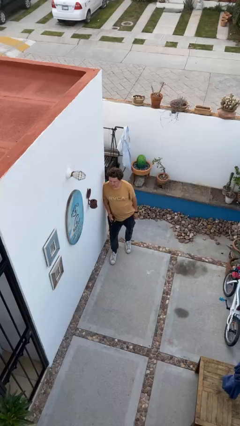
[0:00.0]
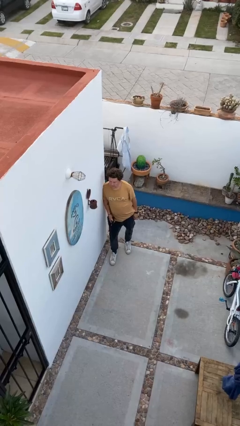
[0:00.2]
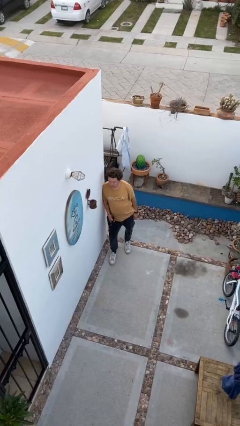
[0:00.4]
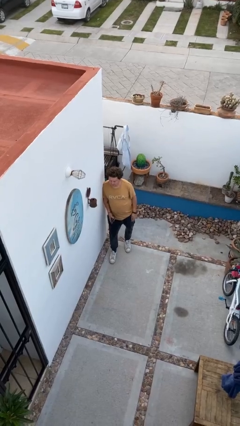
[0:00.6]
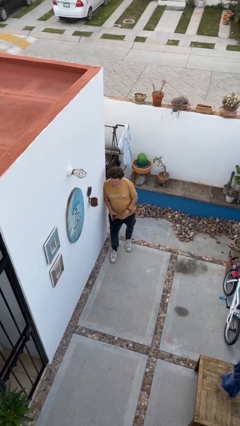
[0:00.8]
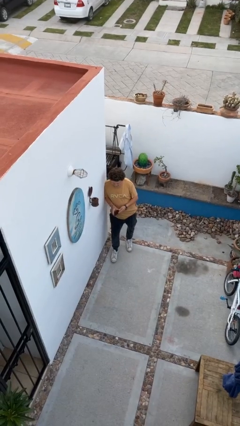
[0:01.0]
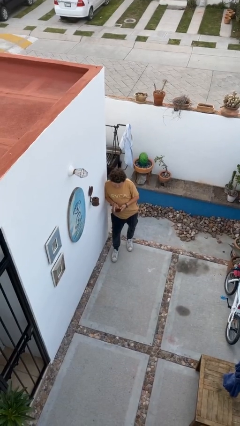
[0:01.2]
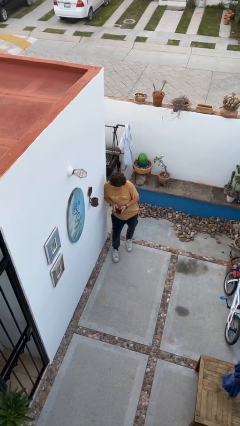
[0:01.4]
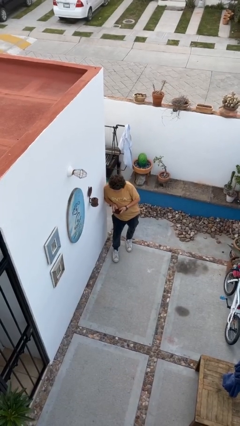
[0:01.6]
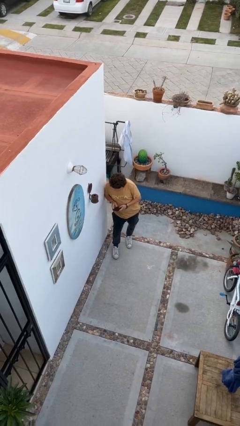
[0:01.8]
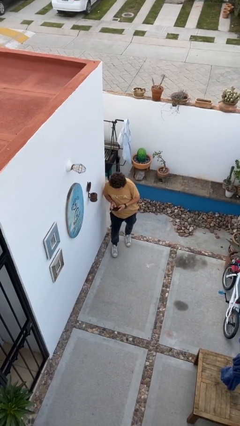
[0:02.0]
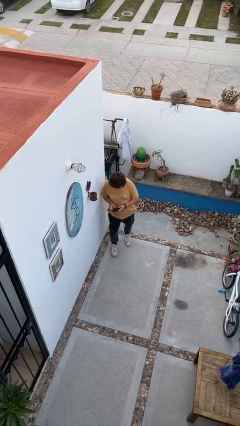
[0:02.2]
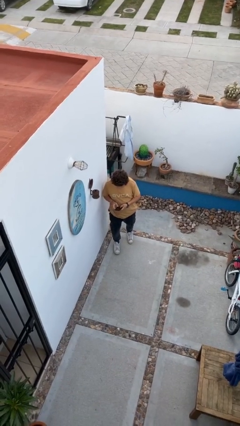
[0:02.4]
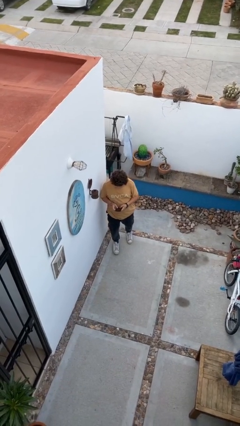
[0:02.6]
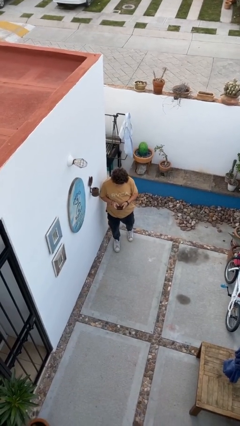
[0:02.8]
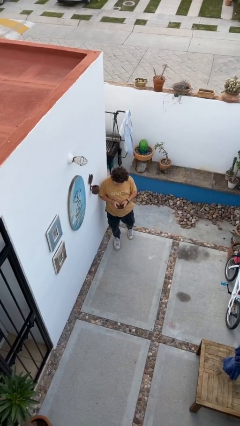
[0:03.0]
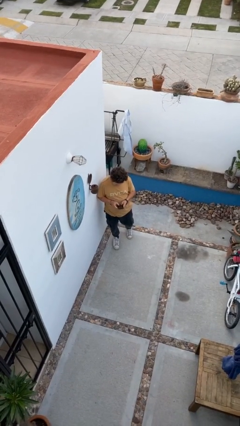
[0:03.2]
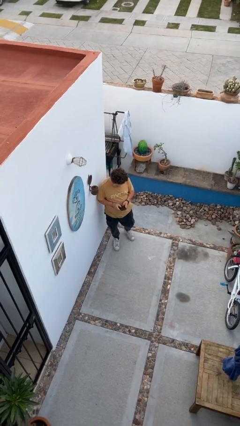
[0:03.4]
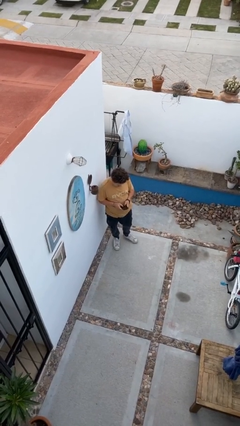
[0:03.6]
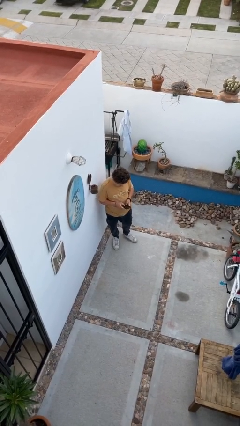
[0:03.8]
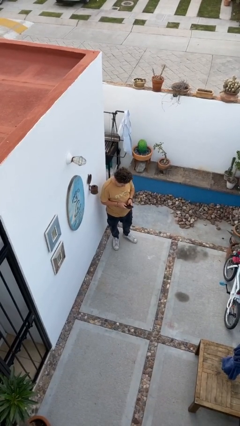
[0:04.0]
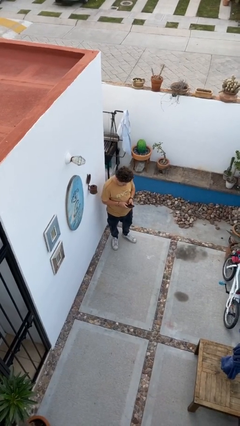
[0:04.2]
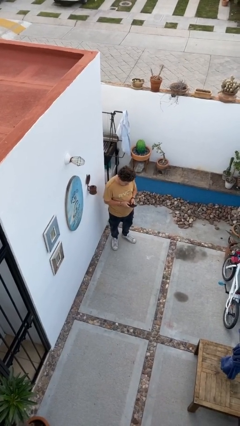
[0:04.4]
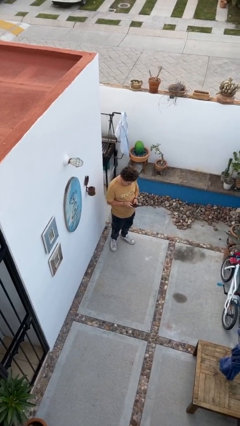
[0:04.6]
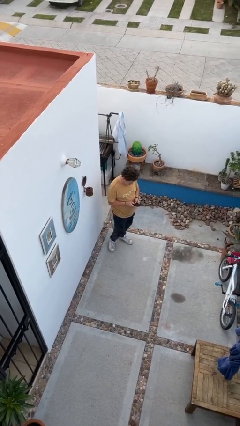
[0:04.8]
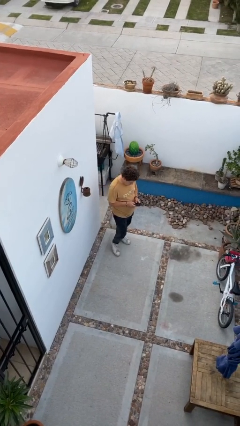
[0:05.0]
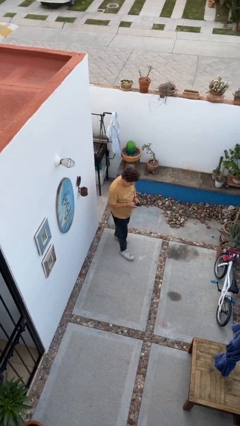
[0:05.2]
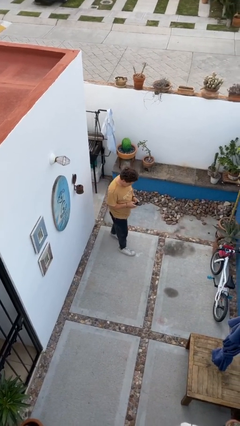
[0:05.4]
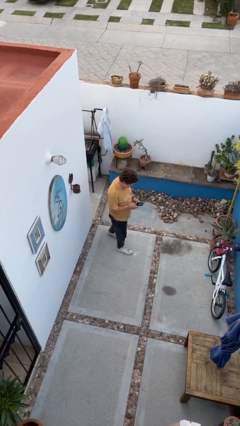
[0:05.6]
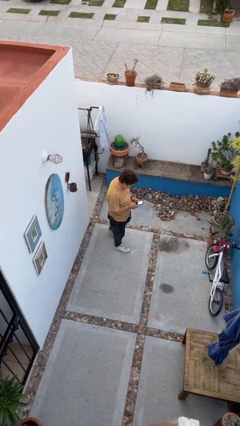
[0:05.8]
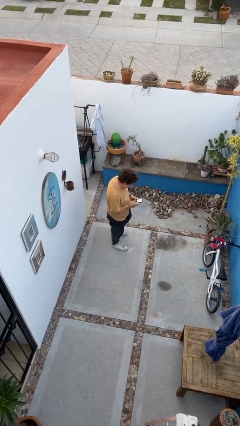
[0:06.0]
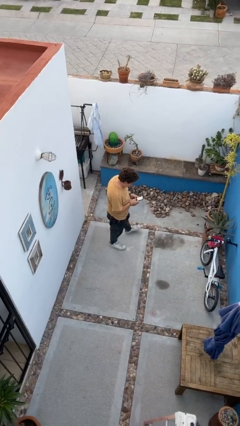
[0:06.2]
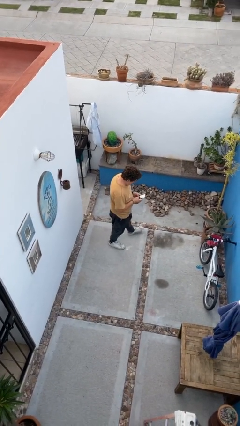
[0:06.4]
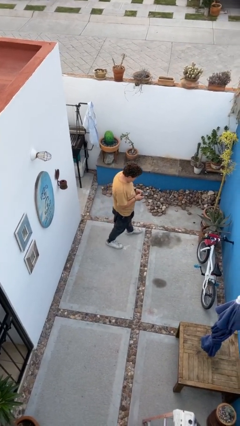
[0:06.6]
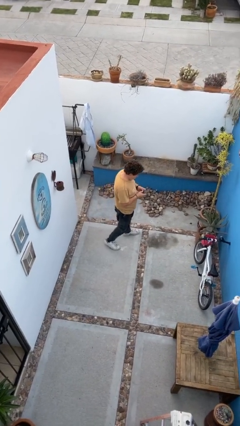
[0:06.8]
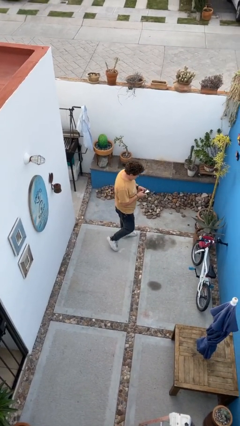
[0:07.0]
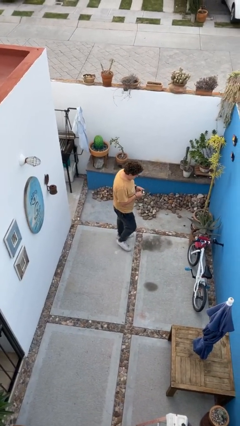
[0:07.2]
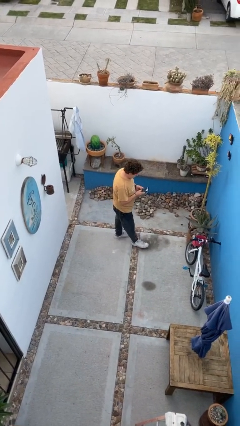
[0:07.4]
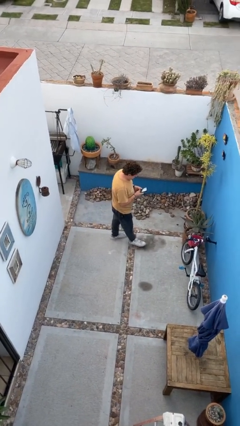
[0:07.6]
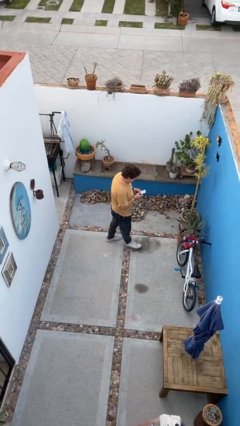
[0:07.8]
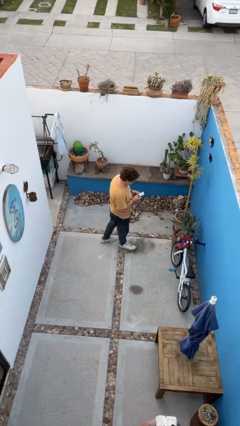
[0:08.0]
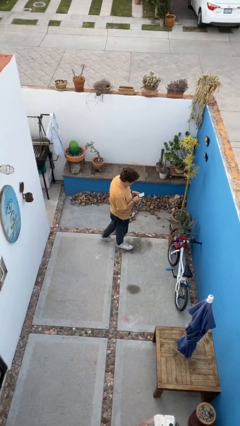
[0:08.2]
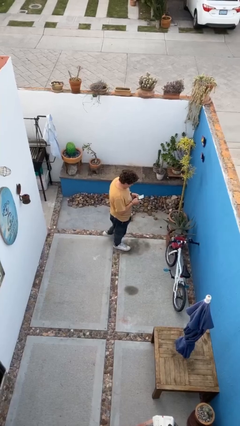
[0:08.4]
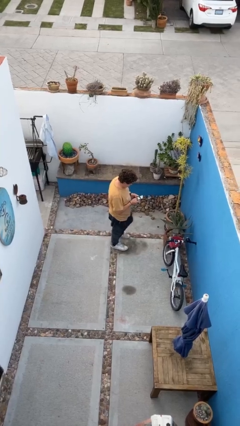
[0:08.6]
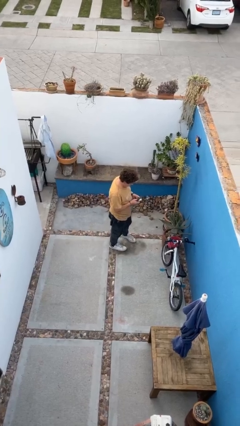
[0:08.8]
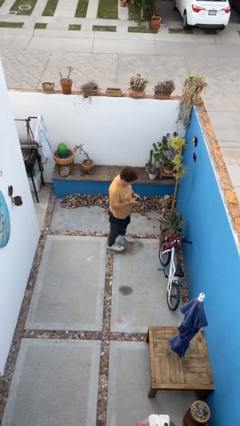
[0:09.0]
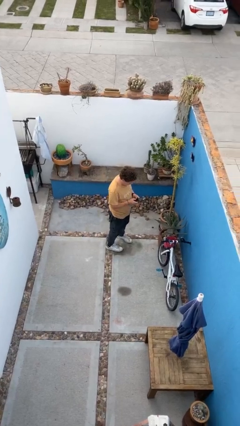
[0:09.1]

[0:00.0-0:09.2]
person texts on phone

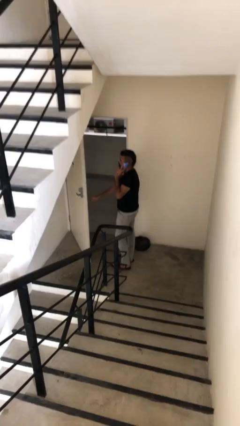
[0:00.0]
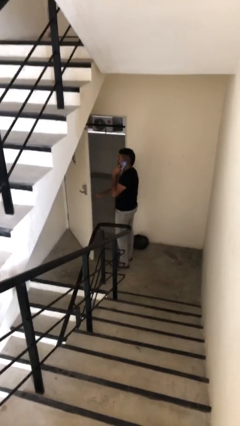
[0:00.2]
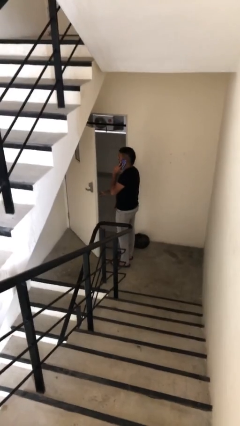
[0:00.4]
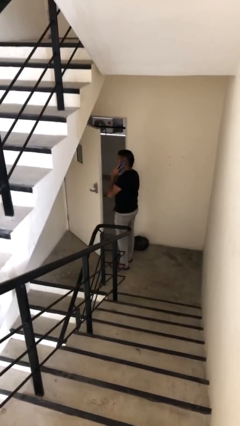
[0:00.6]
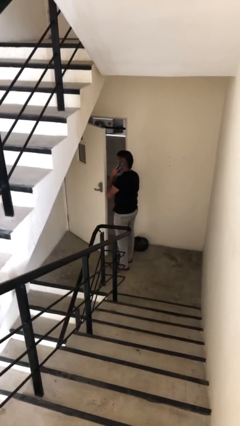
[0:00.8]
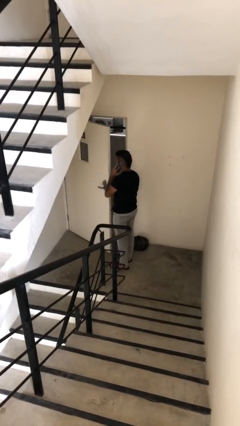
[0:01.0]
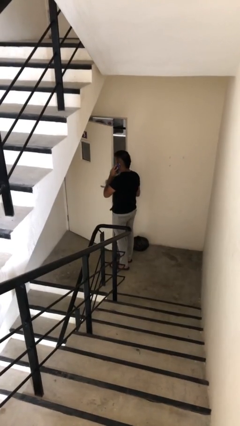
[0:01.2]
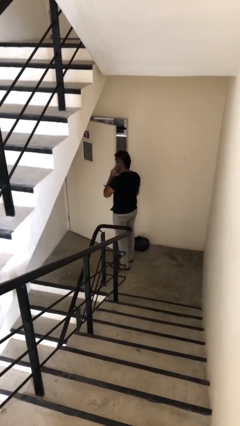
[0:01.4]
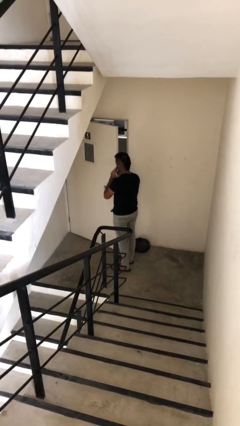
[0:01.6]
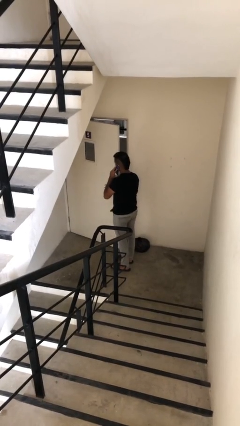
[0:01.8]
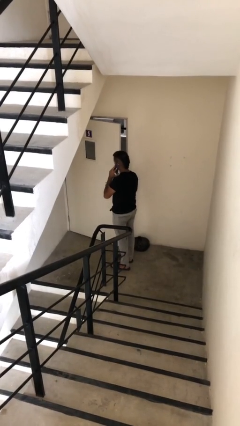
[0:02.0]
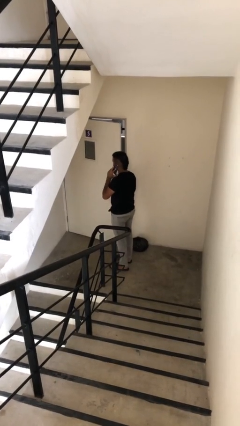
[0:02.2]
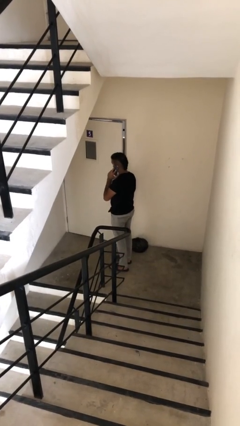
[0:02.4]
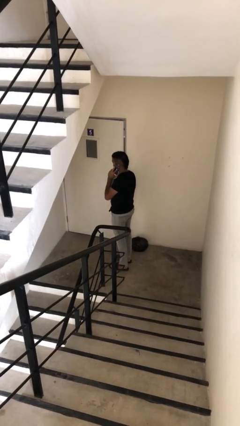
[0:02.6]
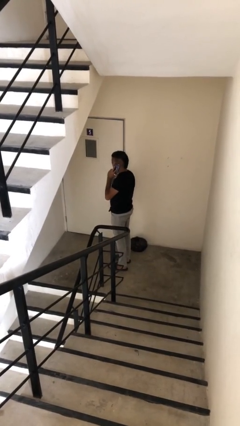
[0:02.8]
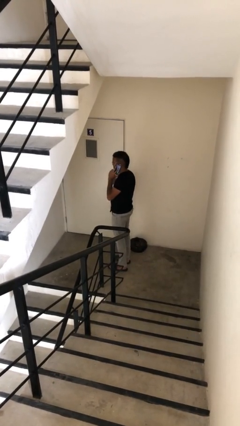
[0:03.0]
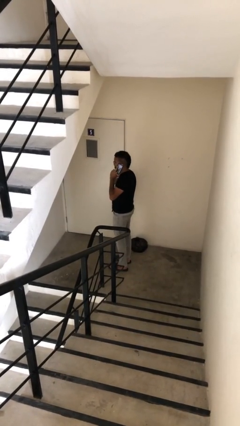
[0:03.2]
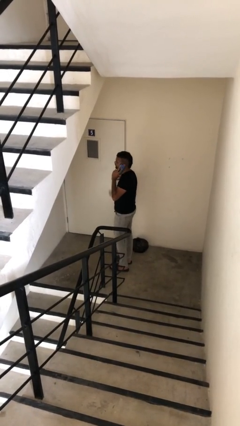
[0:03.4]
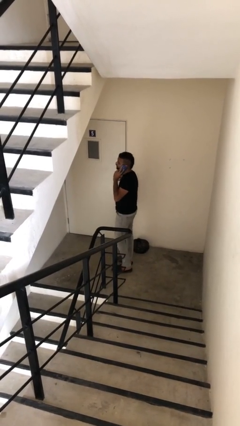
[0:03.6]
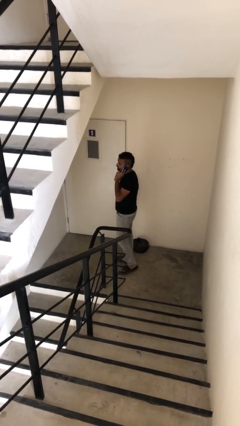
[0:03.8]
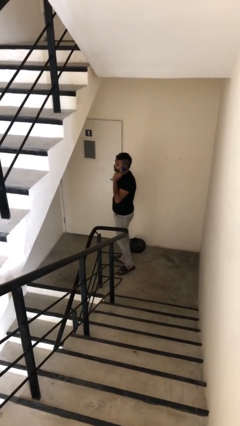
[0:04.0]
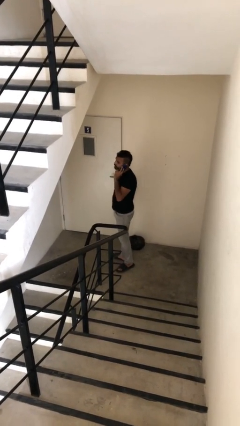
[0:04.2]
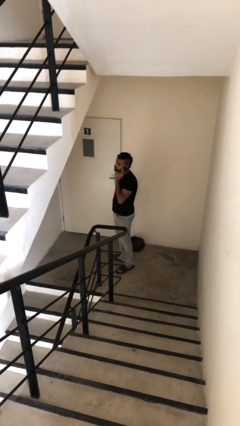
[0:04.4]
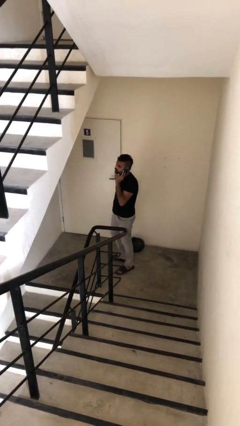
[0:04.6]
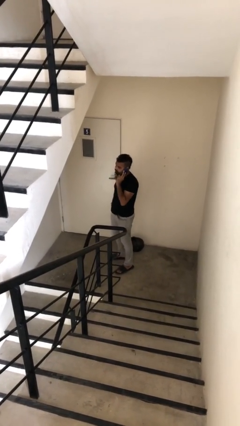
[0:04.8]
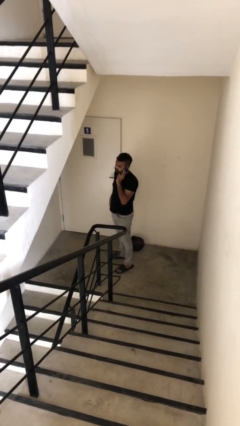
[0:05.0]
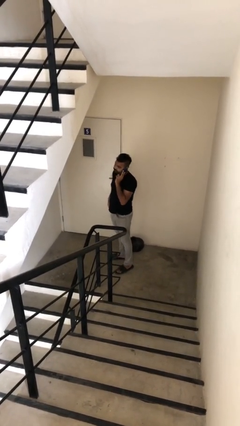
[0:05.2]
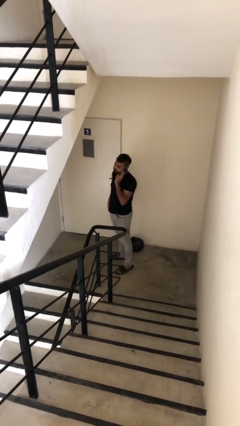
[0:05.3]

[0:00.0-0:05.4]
person closes facility door

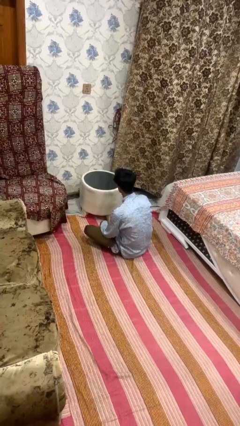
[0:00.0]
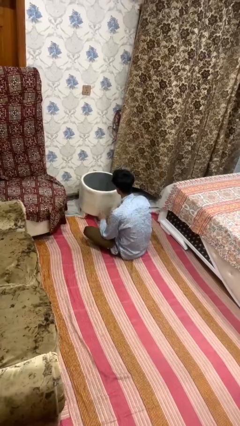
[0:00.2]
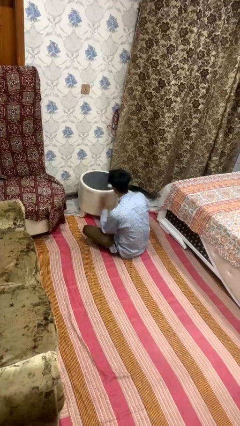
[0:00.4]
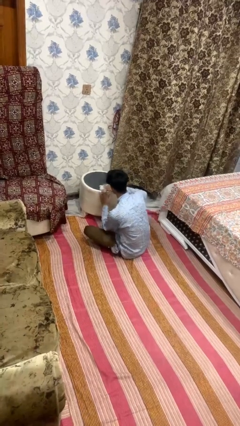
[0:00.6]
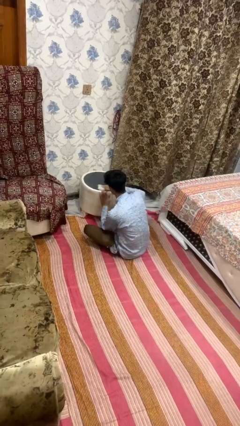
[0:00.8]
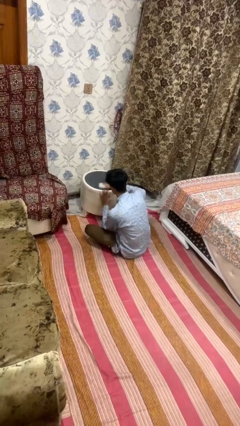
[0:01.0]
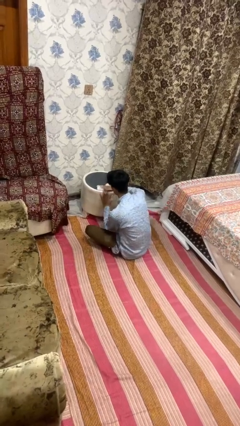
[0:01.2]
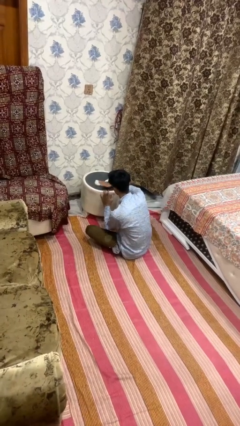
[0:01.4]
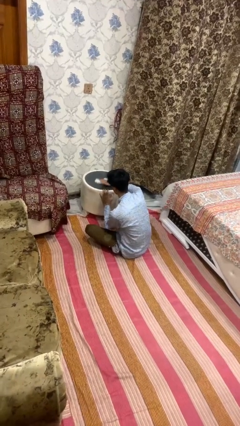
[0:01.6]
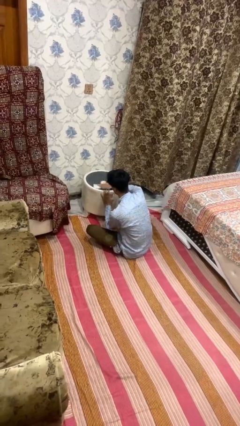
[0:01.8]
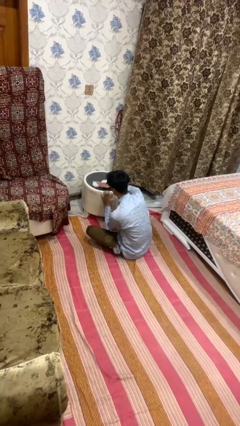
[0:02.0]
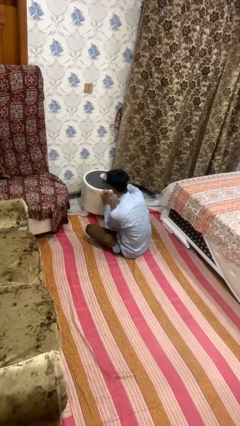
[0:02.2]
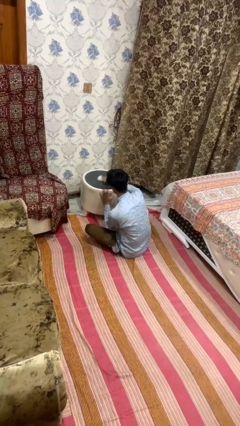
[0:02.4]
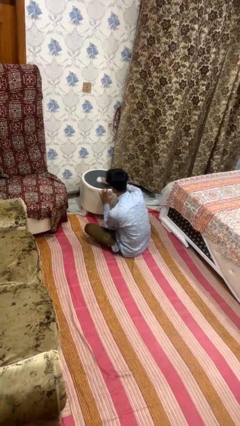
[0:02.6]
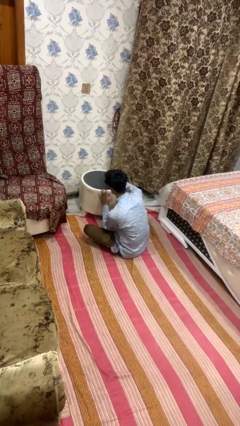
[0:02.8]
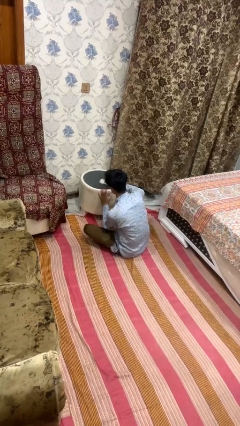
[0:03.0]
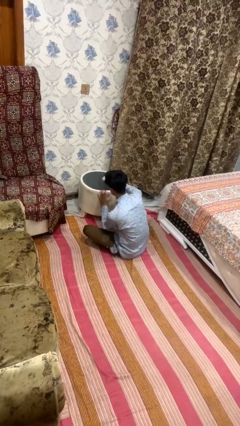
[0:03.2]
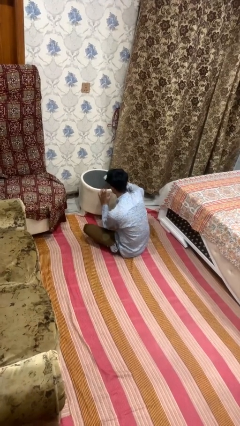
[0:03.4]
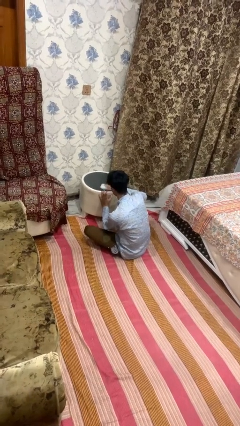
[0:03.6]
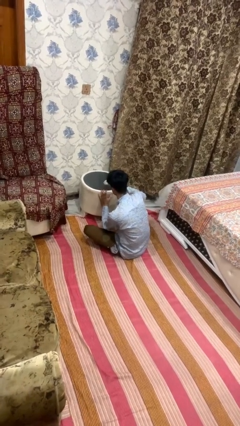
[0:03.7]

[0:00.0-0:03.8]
person cleans table with rag
